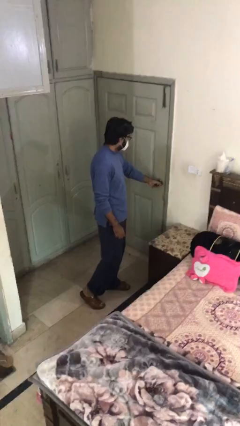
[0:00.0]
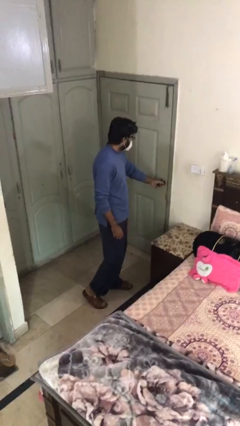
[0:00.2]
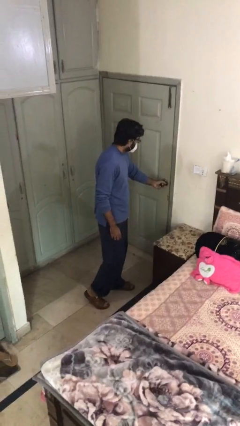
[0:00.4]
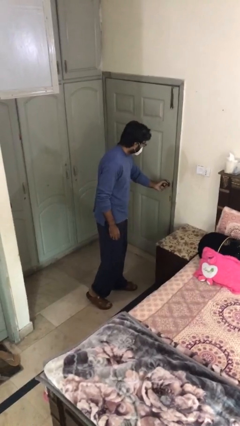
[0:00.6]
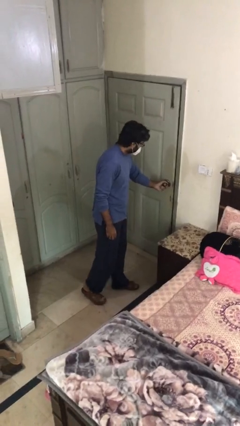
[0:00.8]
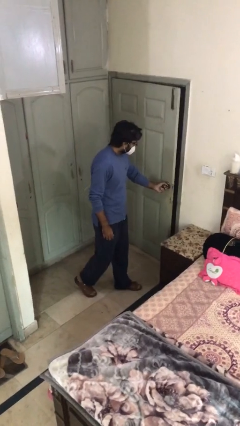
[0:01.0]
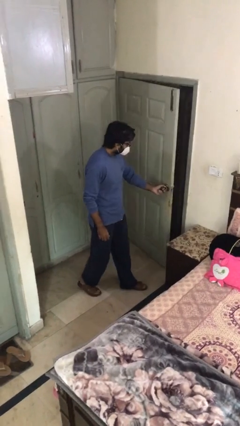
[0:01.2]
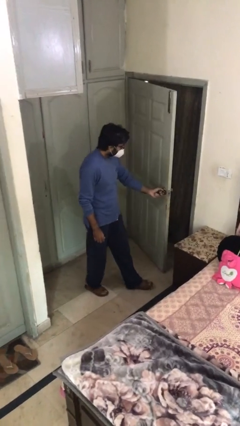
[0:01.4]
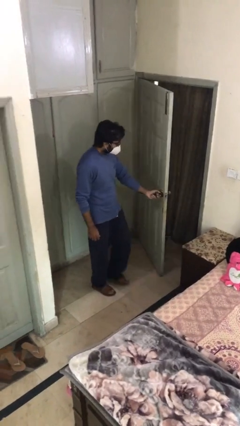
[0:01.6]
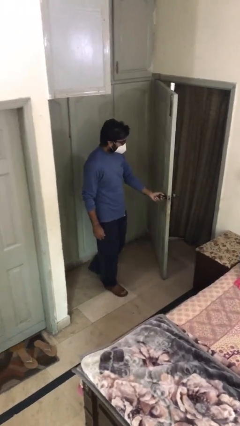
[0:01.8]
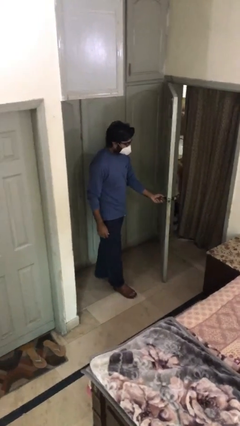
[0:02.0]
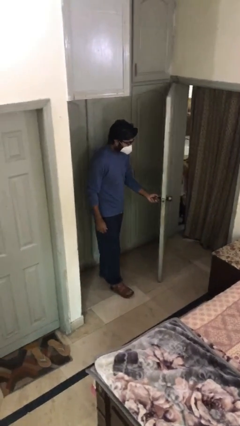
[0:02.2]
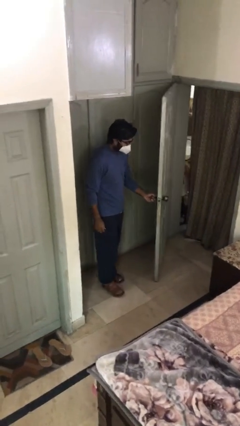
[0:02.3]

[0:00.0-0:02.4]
person opens facility door

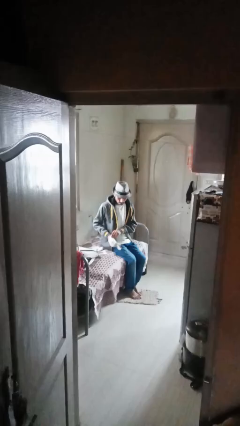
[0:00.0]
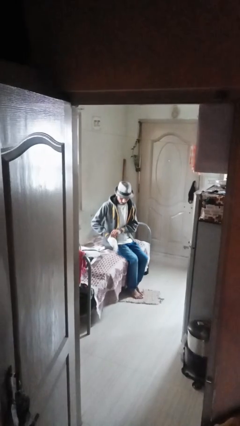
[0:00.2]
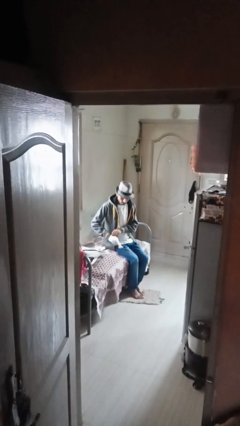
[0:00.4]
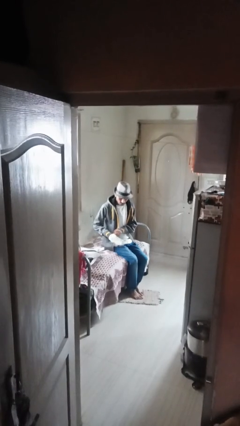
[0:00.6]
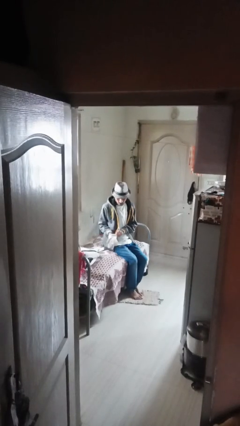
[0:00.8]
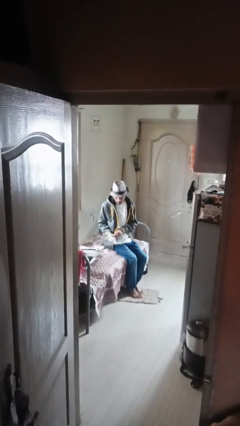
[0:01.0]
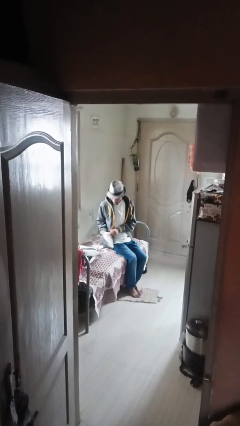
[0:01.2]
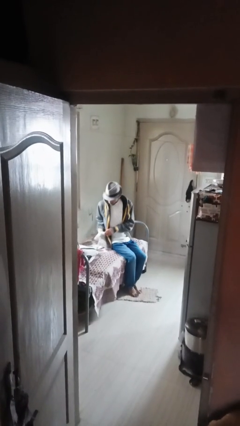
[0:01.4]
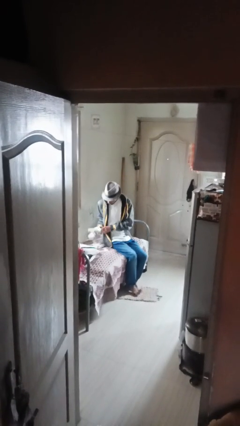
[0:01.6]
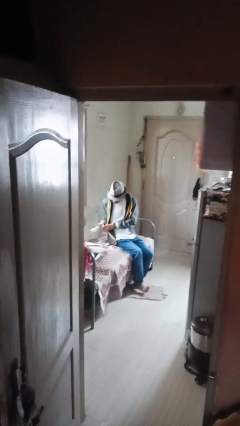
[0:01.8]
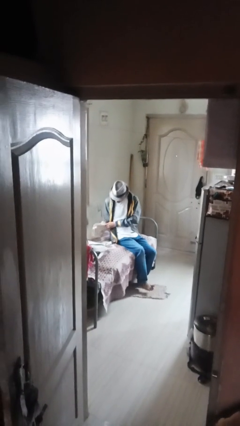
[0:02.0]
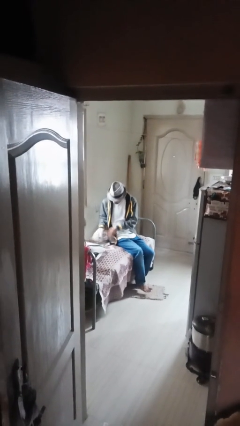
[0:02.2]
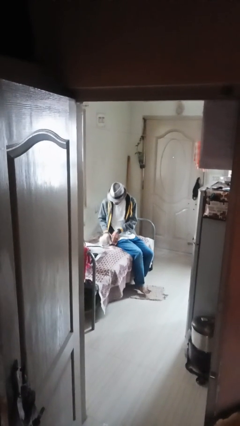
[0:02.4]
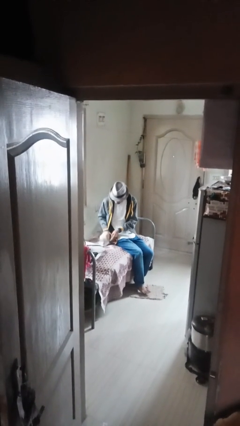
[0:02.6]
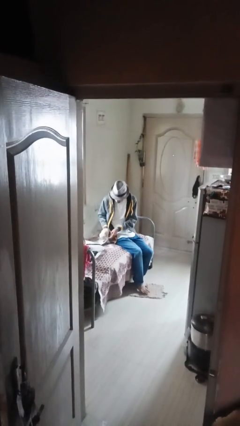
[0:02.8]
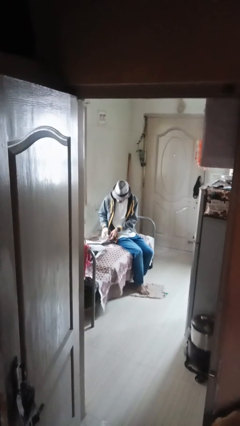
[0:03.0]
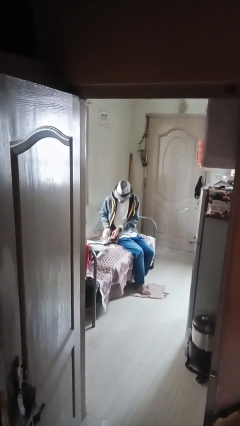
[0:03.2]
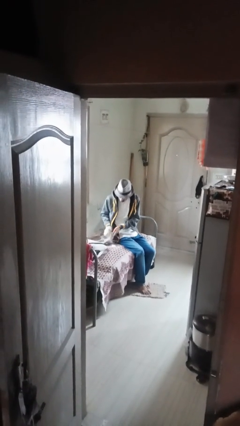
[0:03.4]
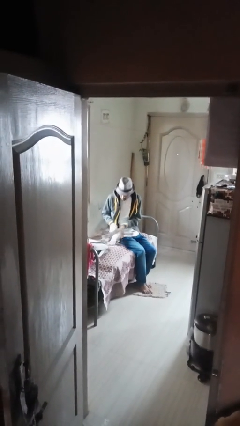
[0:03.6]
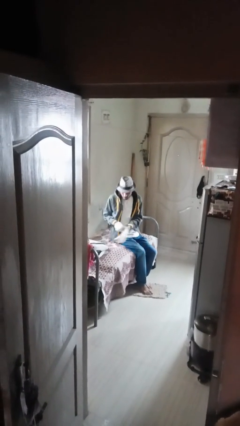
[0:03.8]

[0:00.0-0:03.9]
person puts on gloves

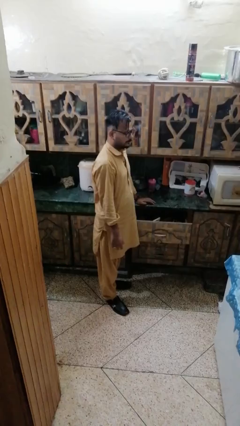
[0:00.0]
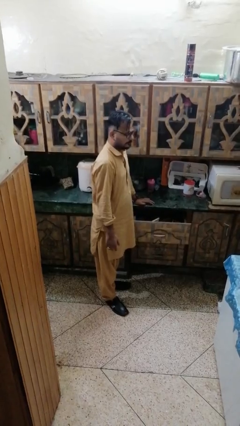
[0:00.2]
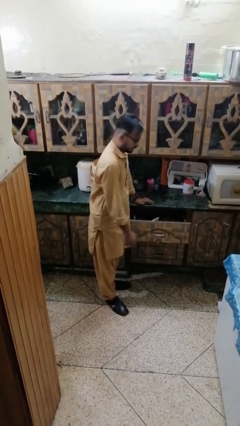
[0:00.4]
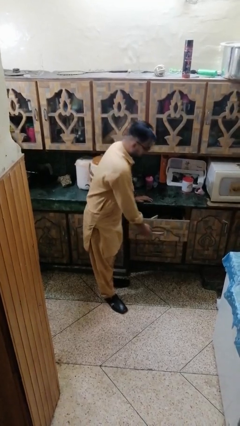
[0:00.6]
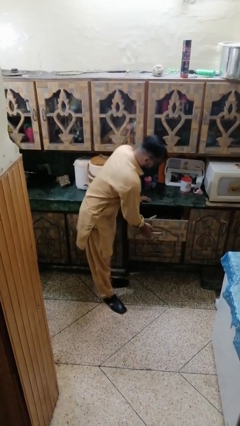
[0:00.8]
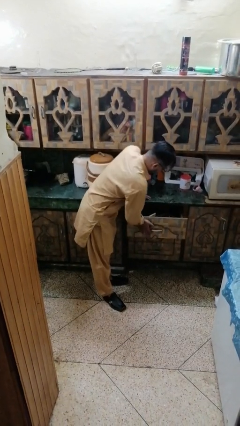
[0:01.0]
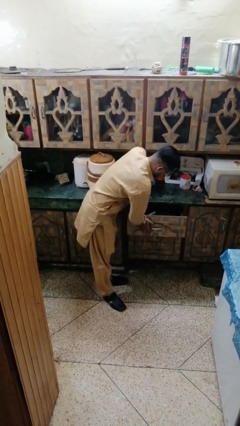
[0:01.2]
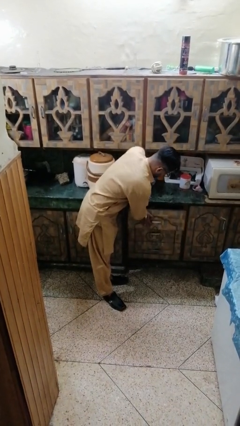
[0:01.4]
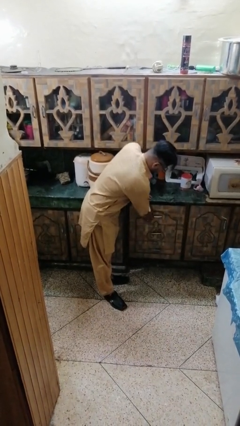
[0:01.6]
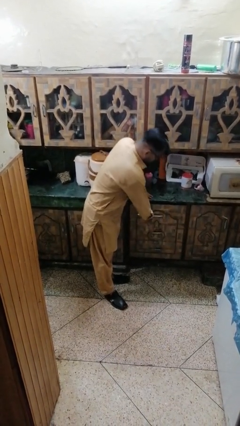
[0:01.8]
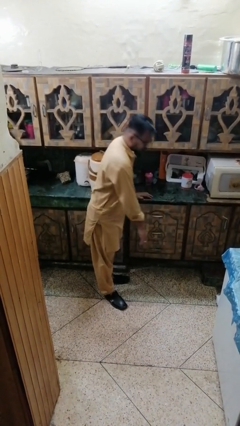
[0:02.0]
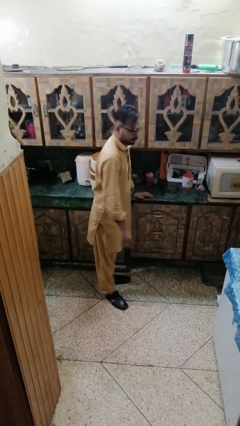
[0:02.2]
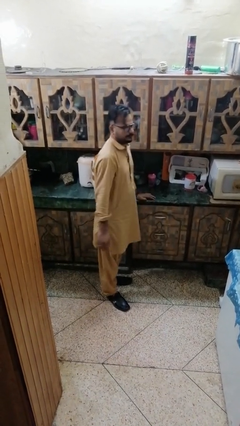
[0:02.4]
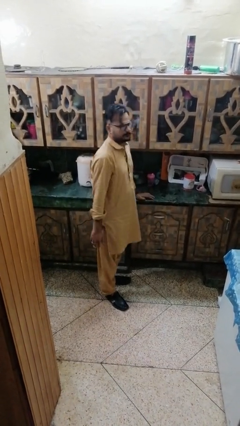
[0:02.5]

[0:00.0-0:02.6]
person closes kitchen drawer

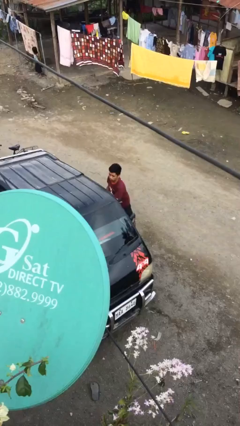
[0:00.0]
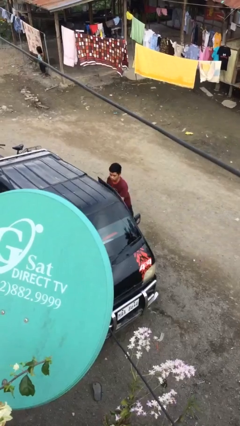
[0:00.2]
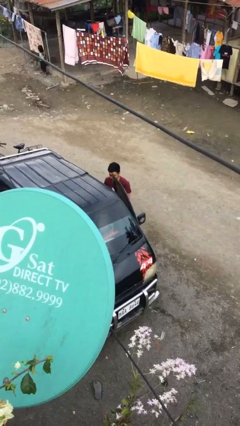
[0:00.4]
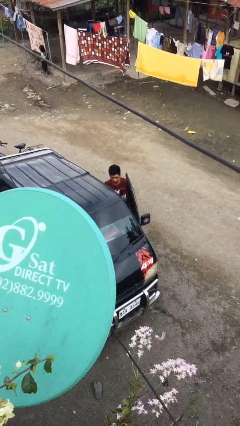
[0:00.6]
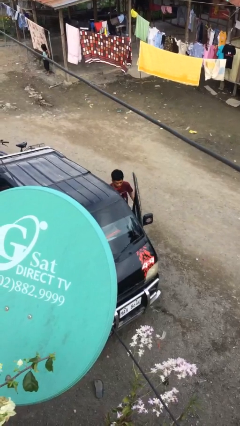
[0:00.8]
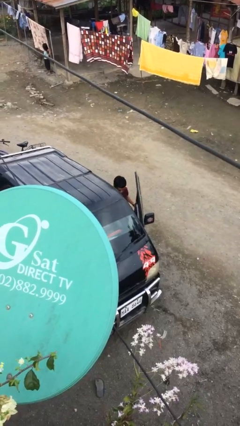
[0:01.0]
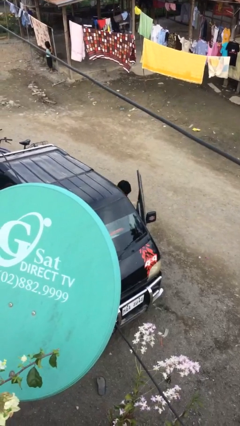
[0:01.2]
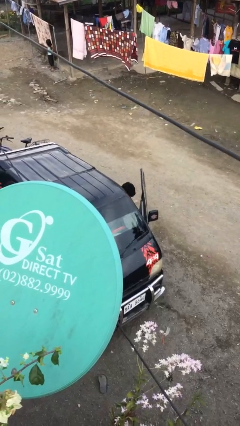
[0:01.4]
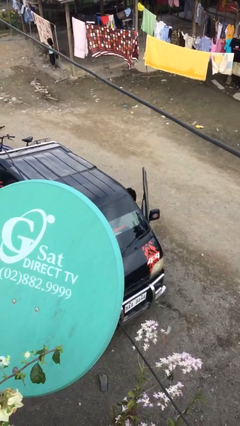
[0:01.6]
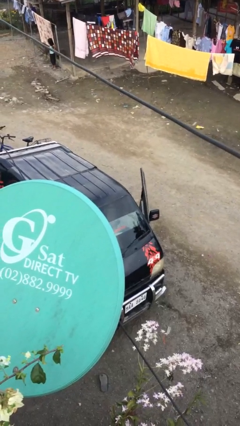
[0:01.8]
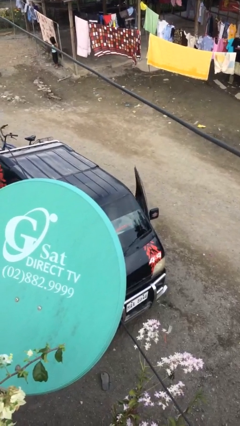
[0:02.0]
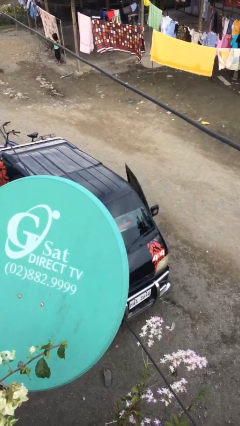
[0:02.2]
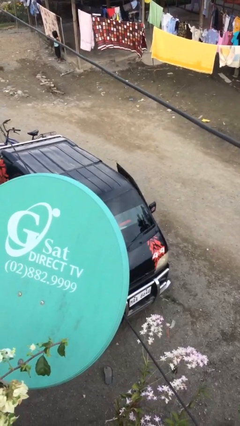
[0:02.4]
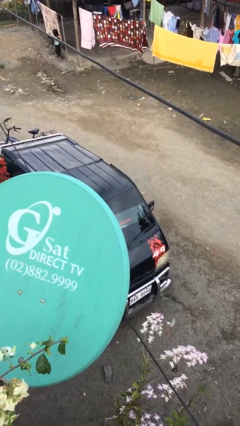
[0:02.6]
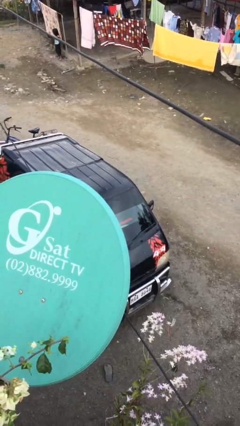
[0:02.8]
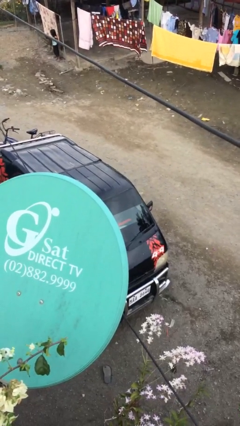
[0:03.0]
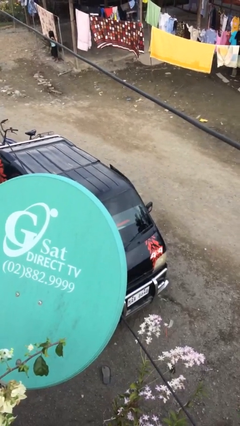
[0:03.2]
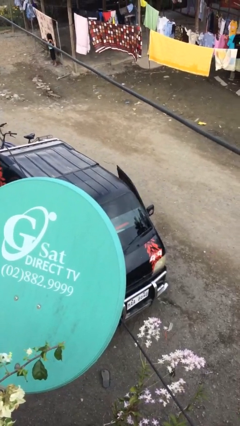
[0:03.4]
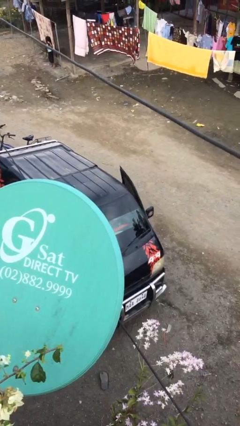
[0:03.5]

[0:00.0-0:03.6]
person enters car

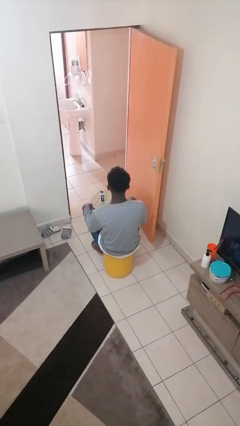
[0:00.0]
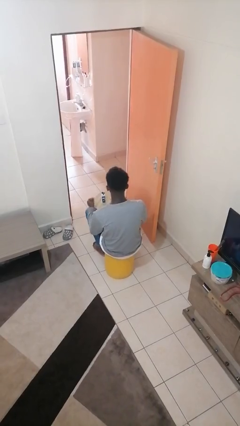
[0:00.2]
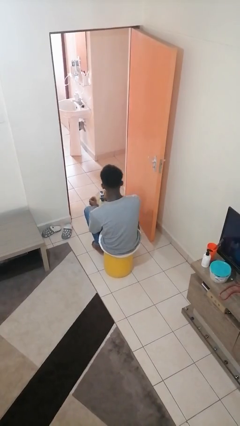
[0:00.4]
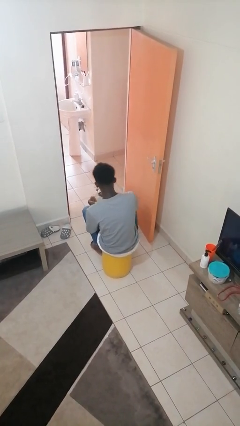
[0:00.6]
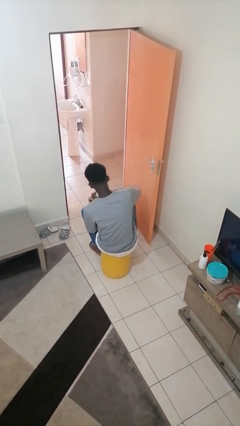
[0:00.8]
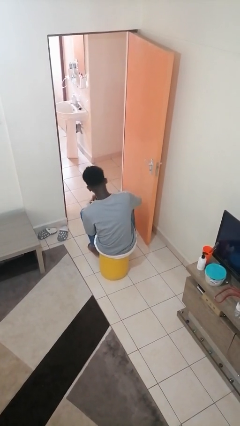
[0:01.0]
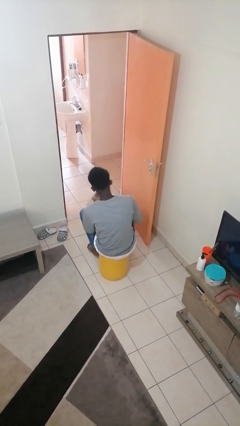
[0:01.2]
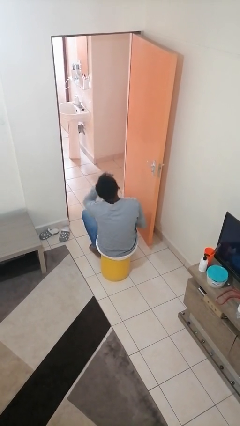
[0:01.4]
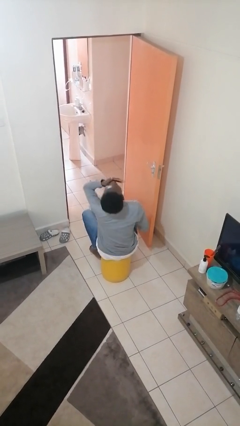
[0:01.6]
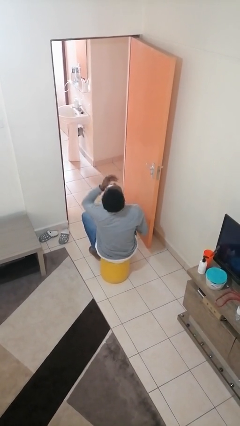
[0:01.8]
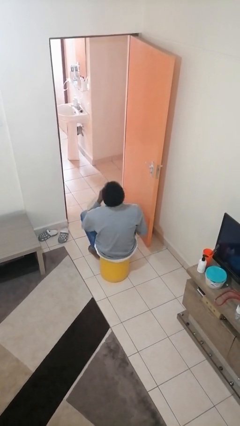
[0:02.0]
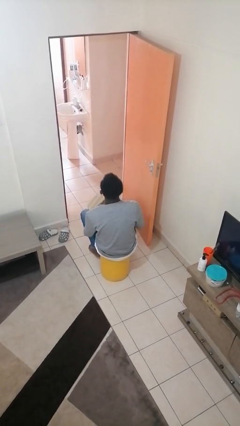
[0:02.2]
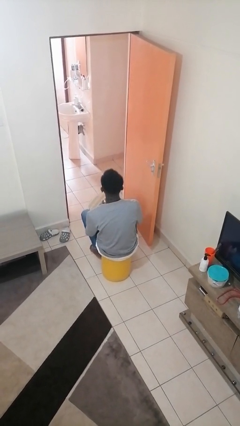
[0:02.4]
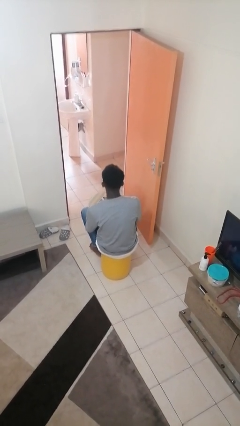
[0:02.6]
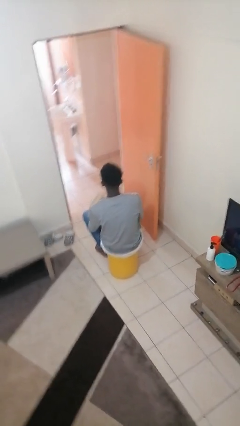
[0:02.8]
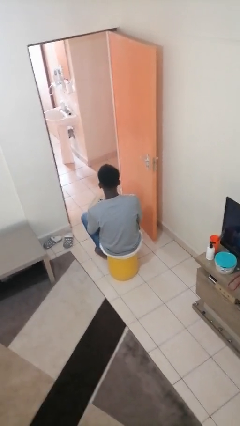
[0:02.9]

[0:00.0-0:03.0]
person takes medicine pills

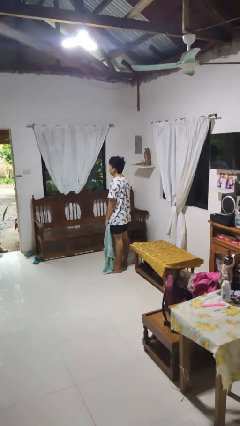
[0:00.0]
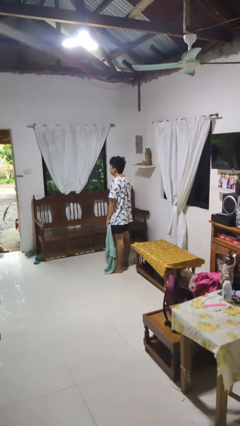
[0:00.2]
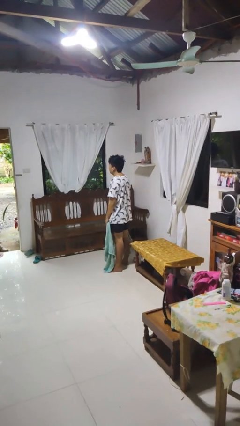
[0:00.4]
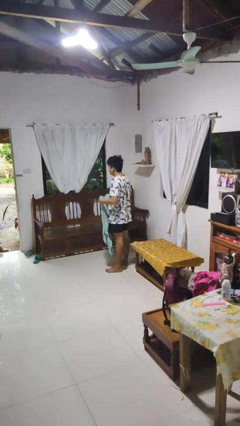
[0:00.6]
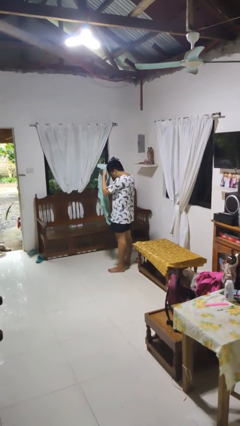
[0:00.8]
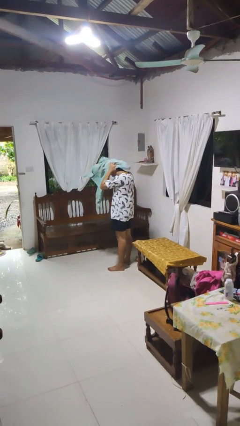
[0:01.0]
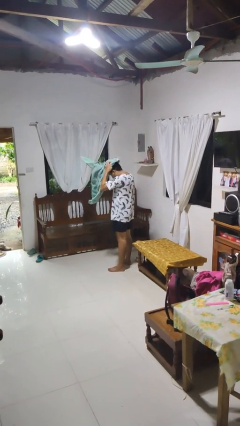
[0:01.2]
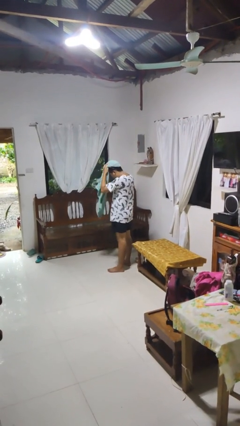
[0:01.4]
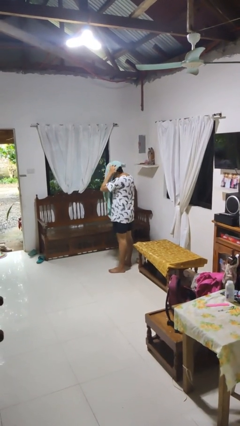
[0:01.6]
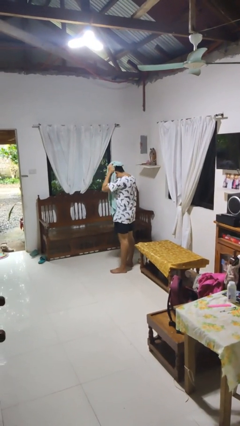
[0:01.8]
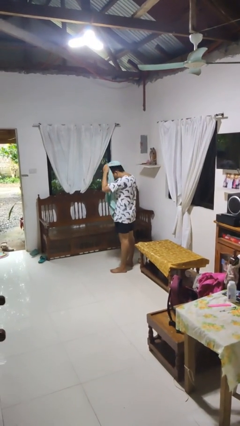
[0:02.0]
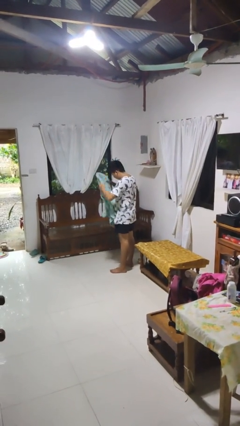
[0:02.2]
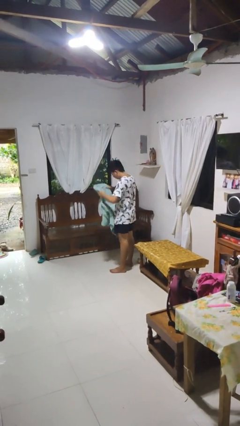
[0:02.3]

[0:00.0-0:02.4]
person dries hair with towel
